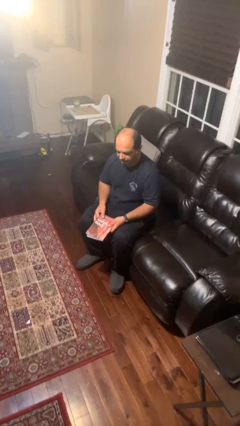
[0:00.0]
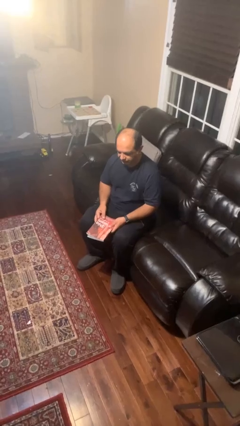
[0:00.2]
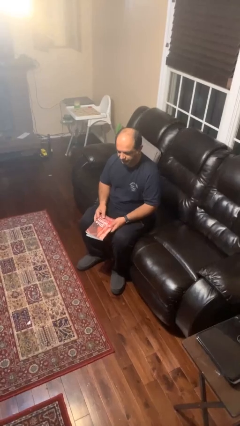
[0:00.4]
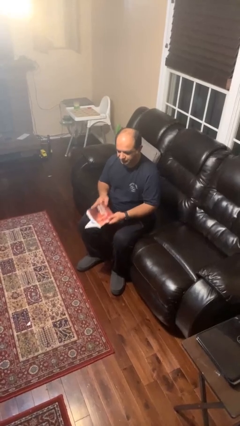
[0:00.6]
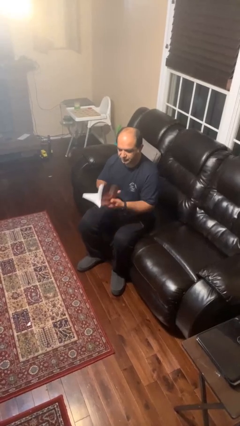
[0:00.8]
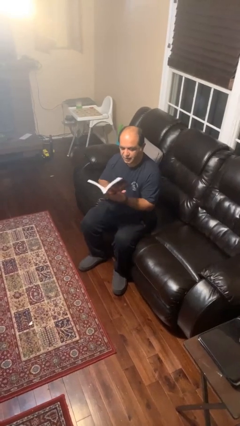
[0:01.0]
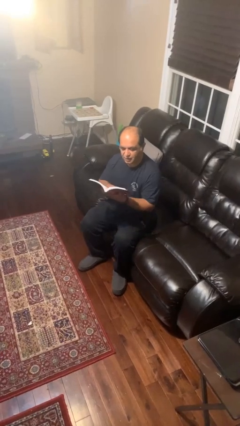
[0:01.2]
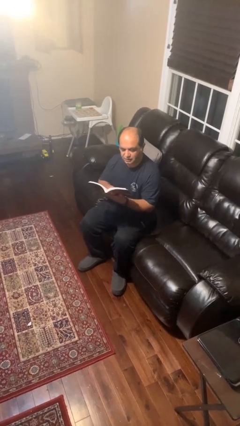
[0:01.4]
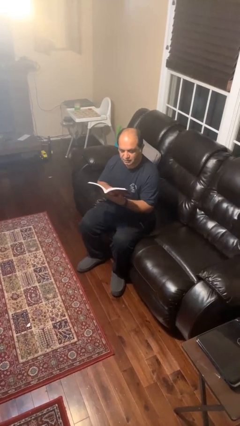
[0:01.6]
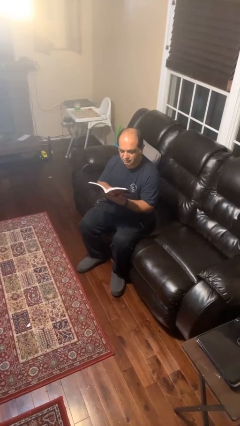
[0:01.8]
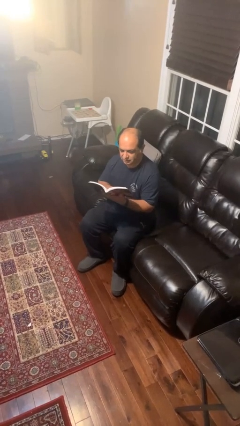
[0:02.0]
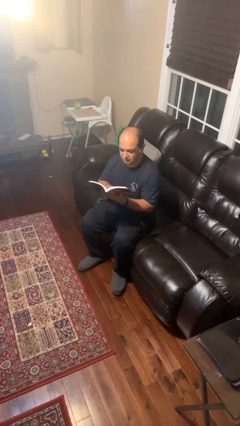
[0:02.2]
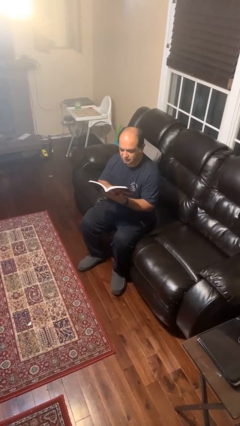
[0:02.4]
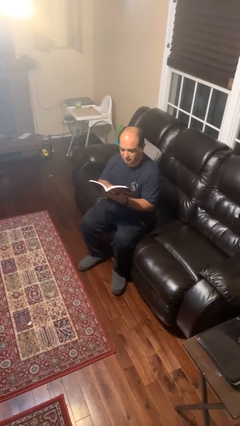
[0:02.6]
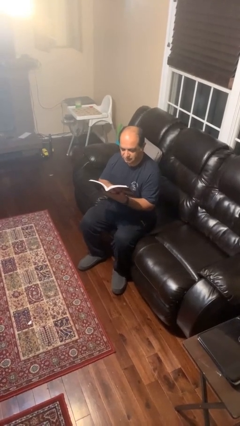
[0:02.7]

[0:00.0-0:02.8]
person reads document

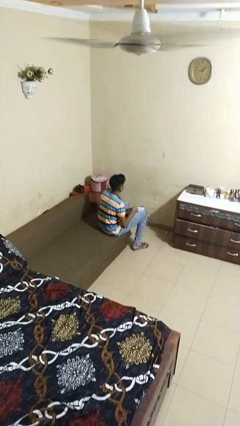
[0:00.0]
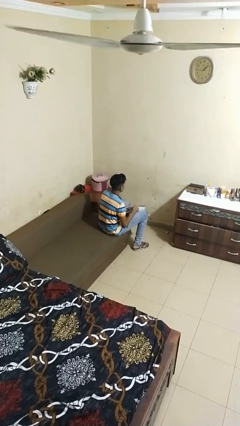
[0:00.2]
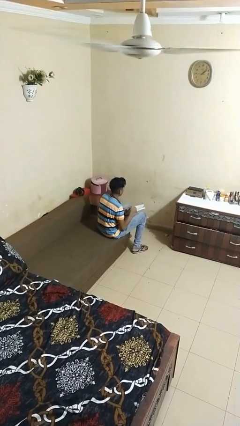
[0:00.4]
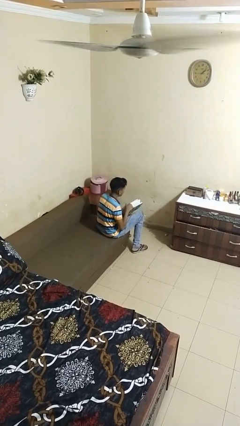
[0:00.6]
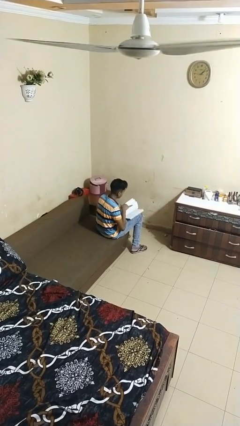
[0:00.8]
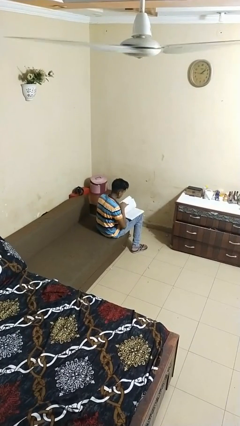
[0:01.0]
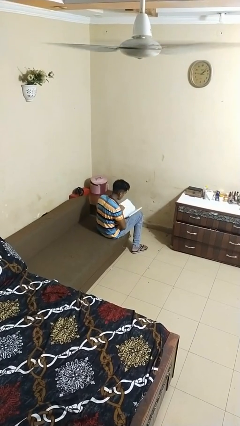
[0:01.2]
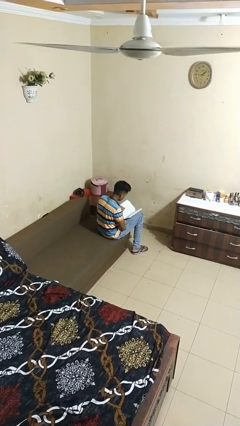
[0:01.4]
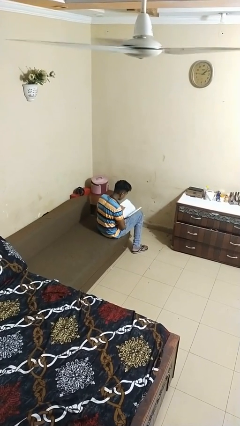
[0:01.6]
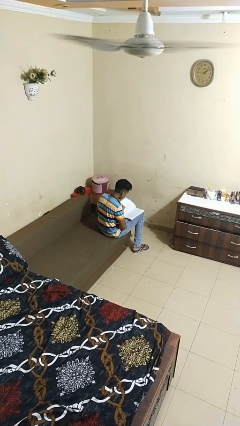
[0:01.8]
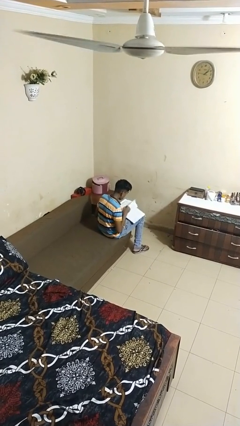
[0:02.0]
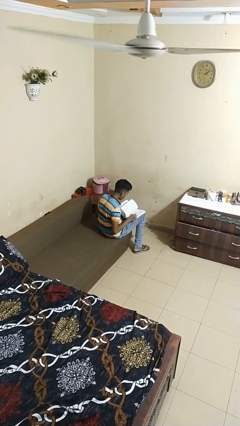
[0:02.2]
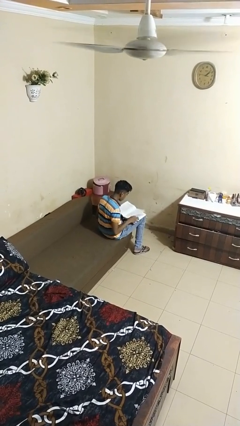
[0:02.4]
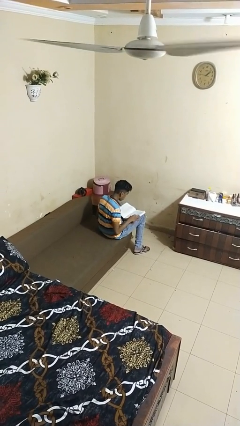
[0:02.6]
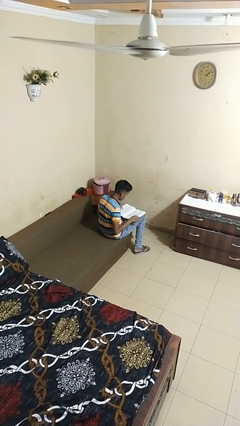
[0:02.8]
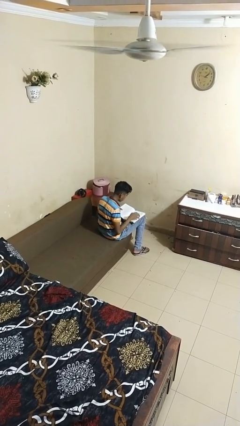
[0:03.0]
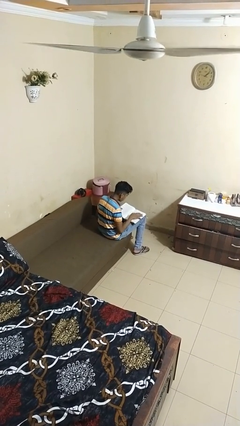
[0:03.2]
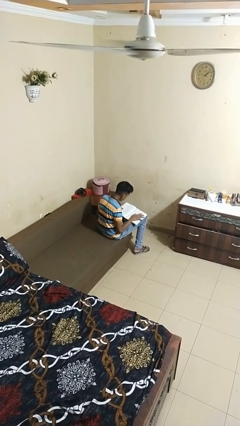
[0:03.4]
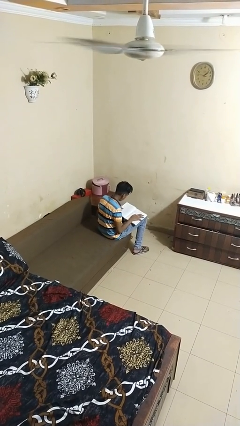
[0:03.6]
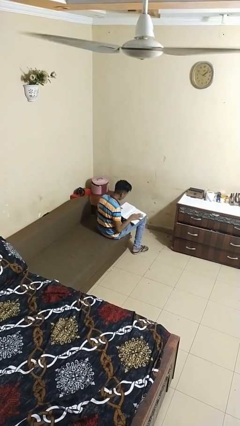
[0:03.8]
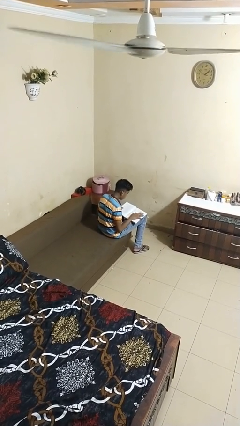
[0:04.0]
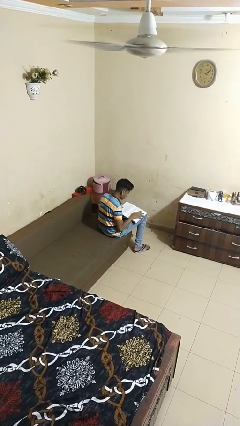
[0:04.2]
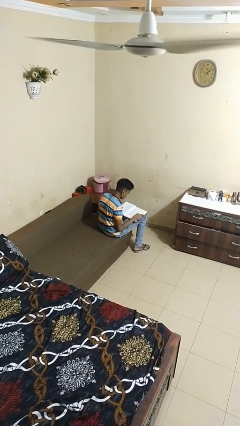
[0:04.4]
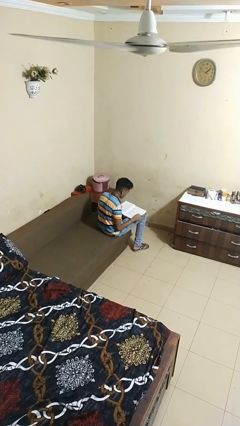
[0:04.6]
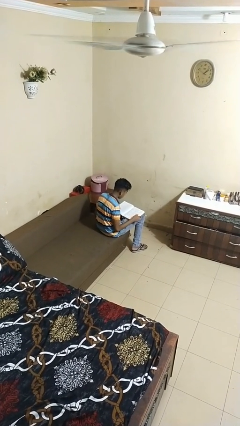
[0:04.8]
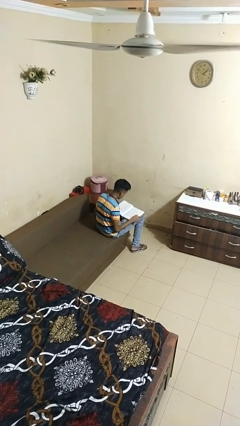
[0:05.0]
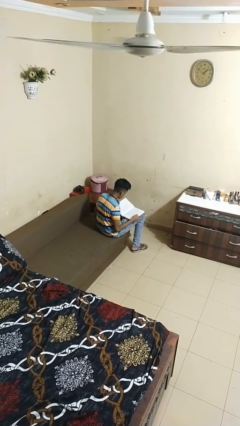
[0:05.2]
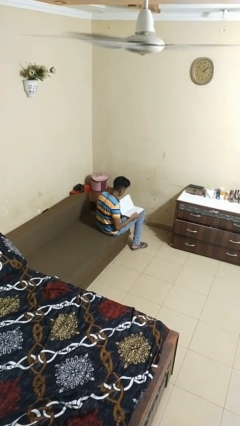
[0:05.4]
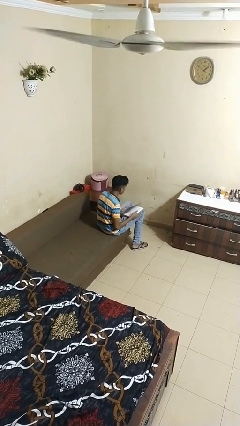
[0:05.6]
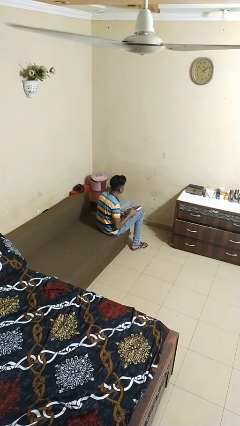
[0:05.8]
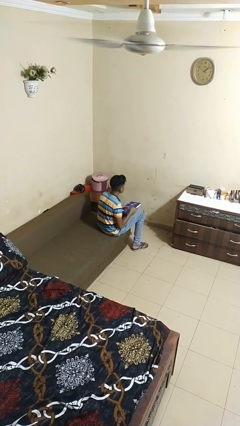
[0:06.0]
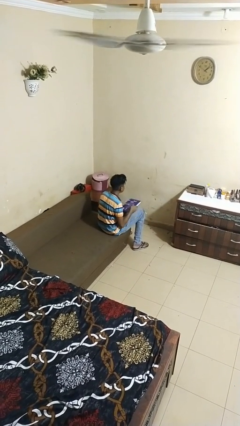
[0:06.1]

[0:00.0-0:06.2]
person reads book

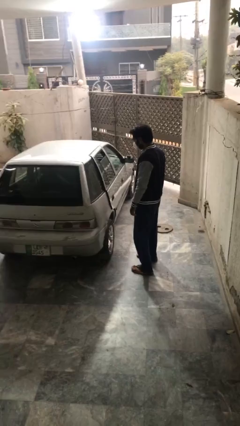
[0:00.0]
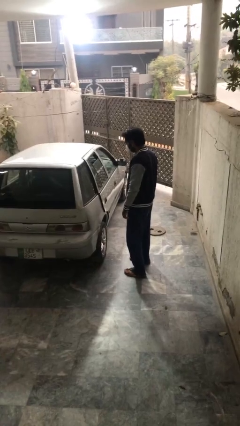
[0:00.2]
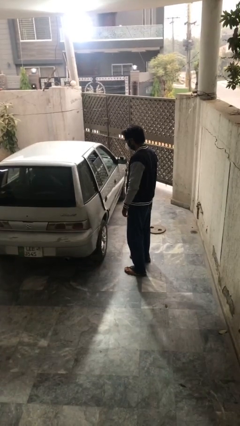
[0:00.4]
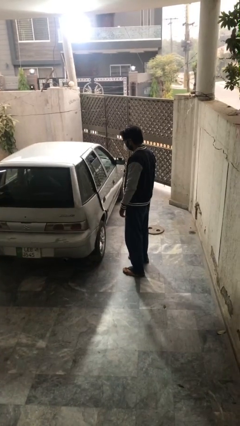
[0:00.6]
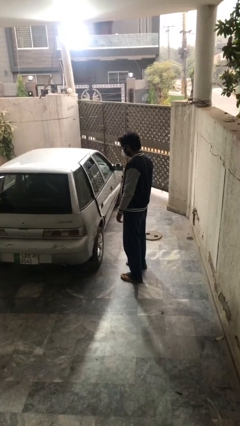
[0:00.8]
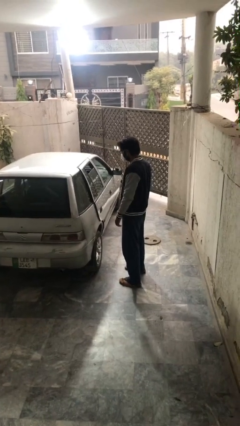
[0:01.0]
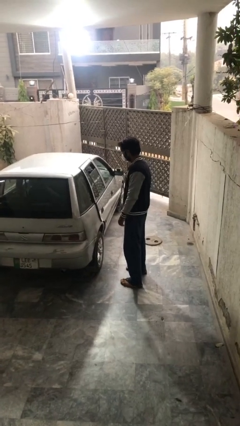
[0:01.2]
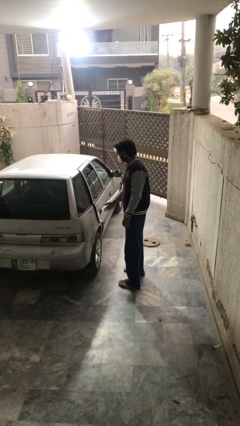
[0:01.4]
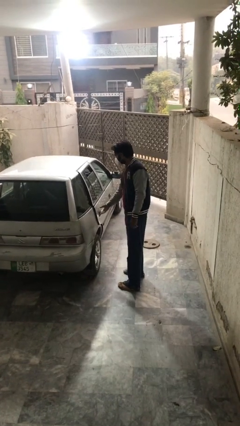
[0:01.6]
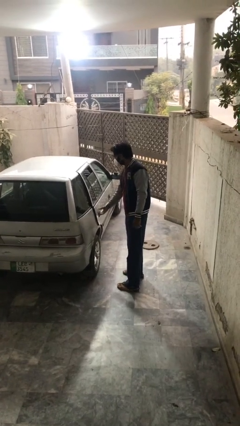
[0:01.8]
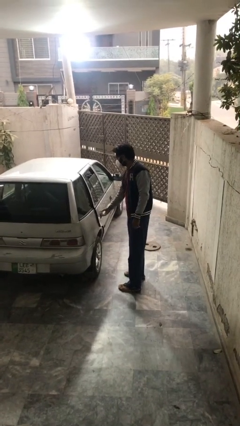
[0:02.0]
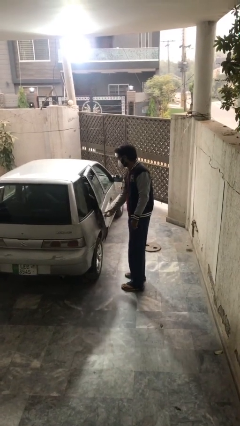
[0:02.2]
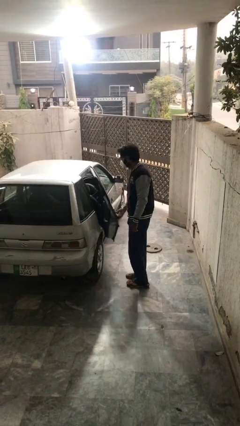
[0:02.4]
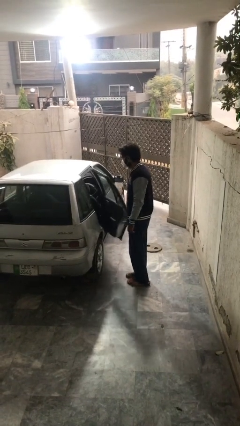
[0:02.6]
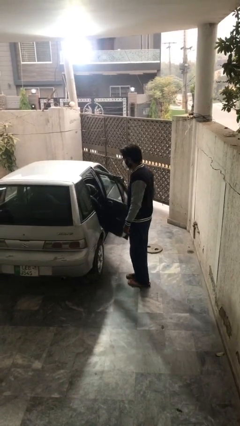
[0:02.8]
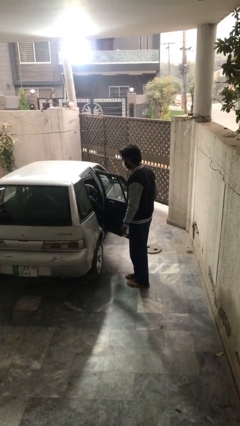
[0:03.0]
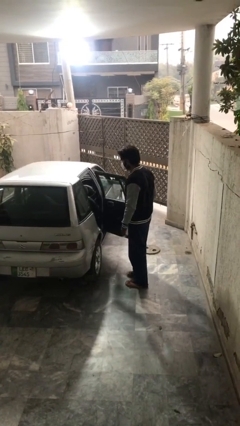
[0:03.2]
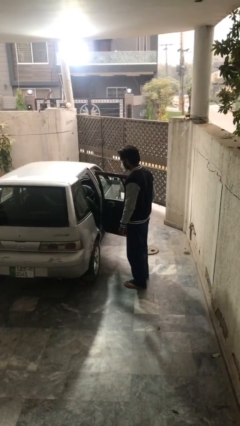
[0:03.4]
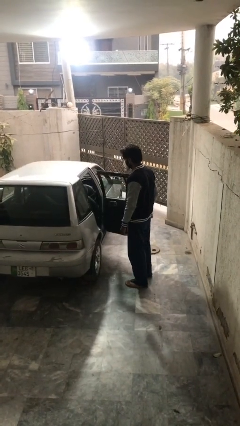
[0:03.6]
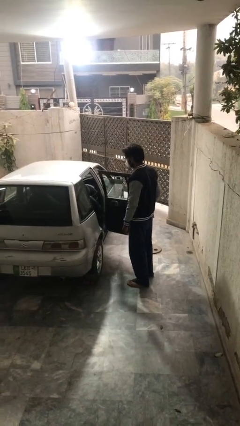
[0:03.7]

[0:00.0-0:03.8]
person opens car door

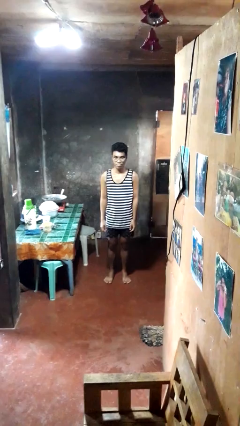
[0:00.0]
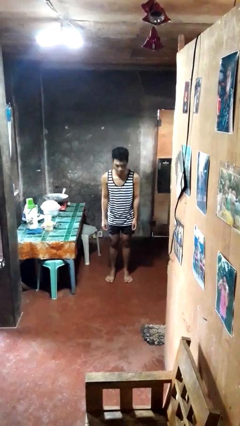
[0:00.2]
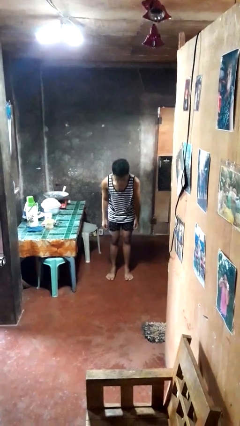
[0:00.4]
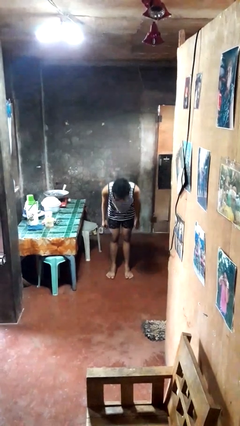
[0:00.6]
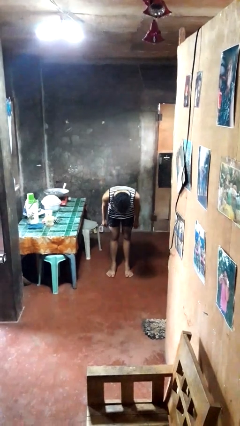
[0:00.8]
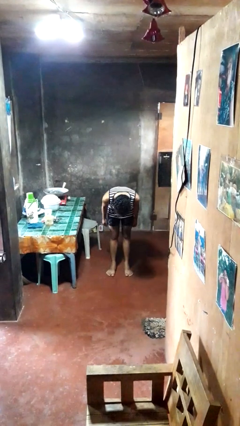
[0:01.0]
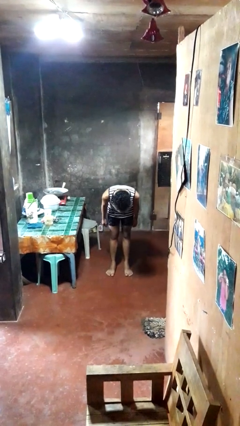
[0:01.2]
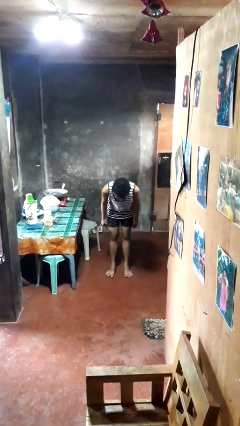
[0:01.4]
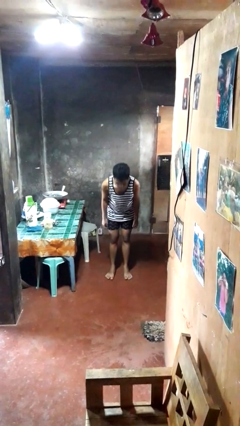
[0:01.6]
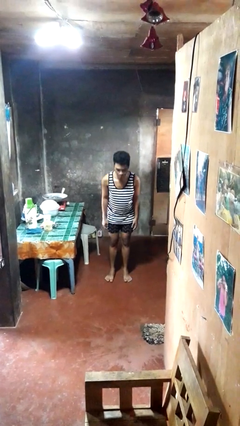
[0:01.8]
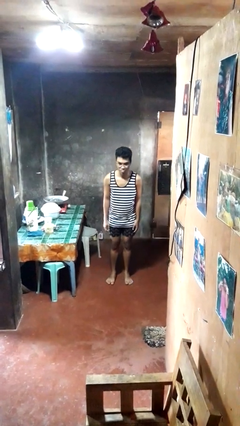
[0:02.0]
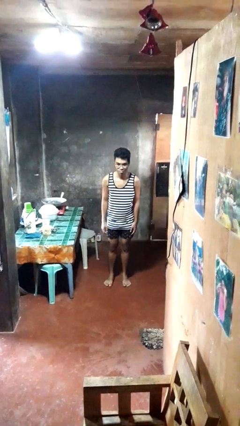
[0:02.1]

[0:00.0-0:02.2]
person bows

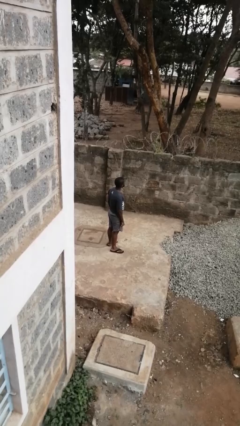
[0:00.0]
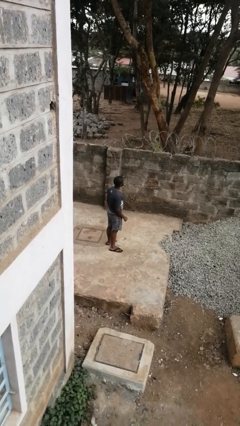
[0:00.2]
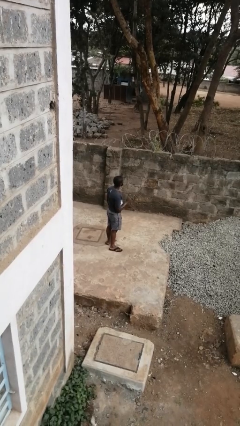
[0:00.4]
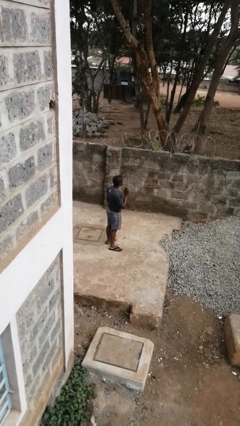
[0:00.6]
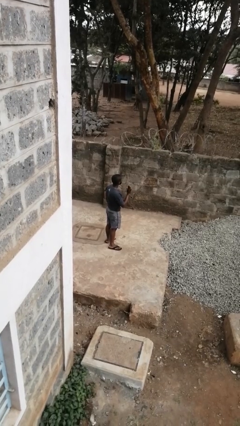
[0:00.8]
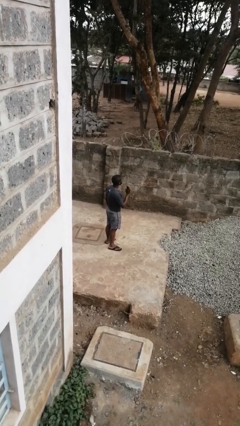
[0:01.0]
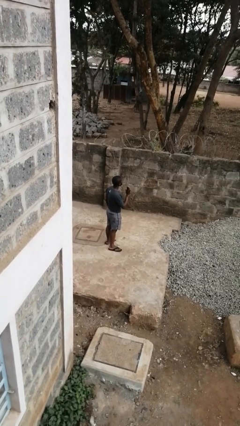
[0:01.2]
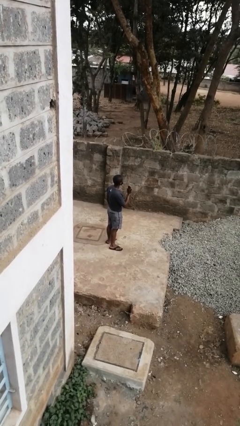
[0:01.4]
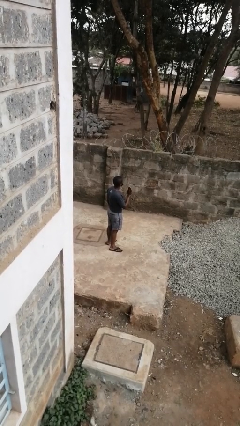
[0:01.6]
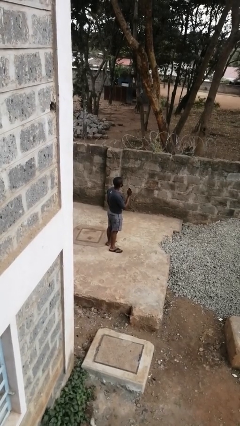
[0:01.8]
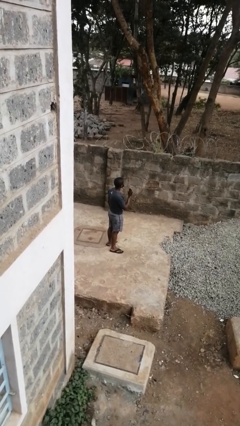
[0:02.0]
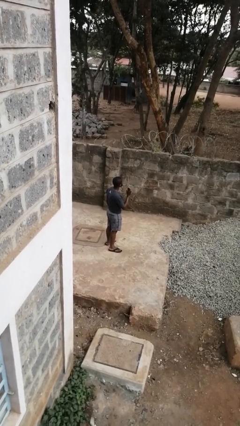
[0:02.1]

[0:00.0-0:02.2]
person gestures stop

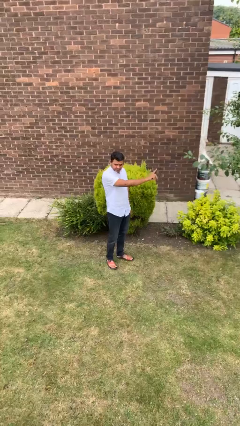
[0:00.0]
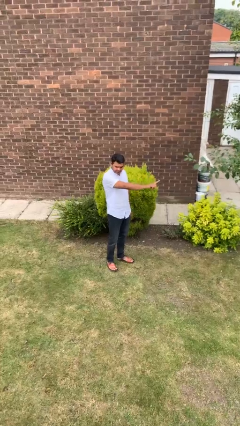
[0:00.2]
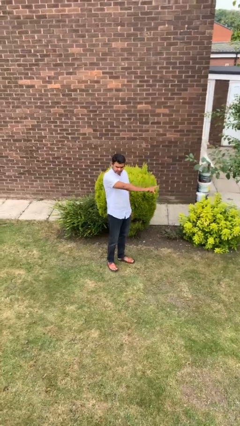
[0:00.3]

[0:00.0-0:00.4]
person gestures swipe right
